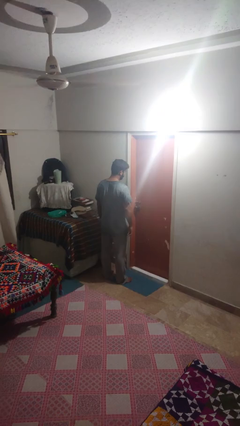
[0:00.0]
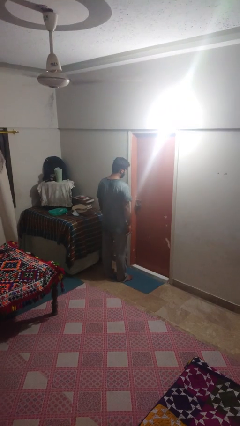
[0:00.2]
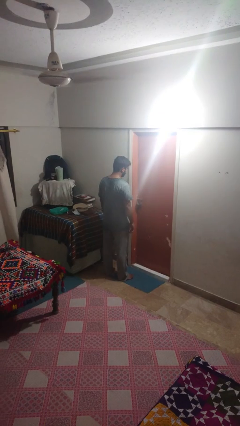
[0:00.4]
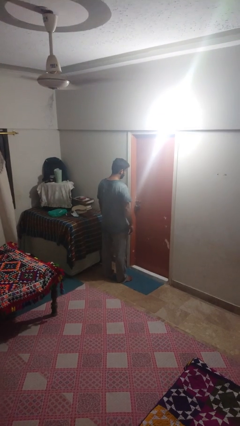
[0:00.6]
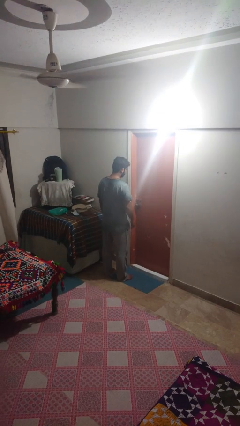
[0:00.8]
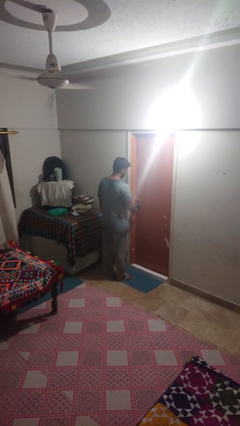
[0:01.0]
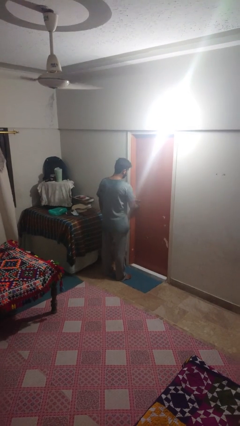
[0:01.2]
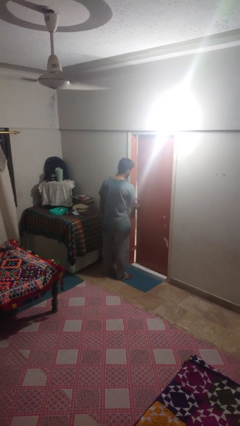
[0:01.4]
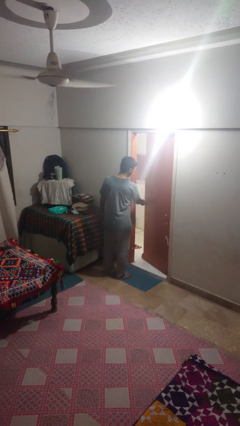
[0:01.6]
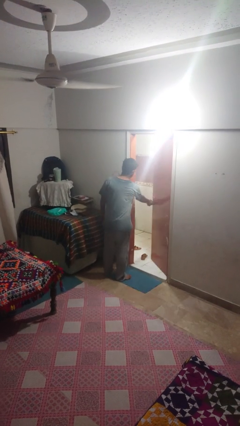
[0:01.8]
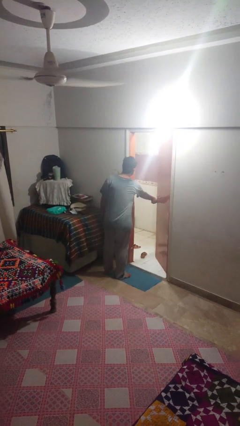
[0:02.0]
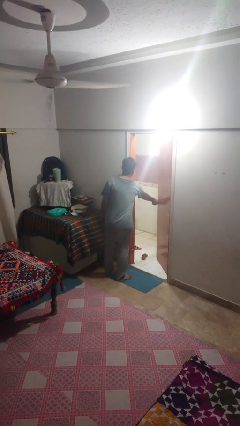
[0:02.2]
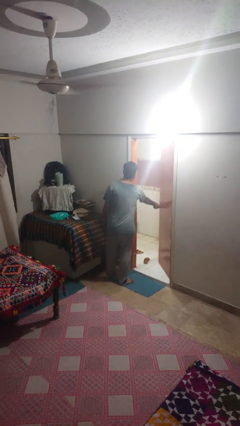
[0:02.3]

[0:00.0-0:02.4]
person opens facility door

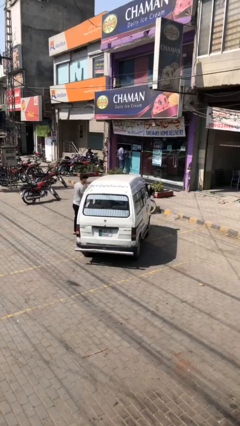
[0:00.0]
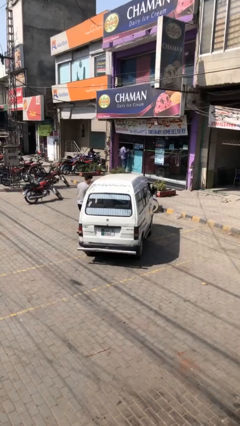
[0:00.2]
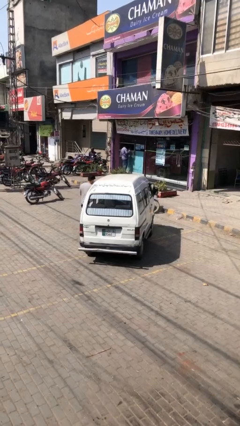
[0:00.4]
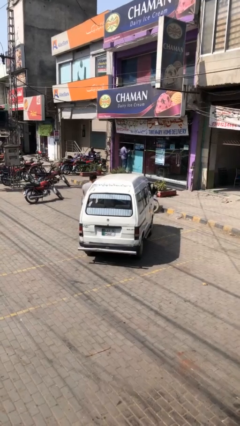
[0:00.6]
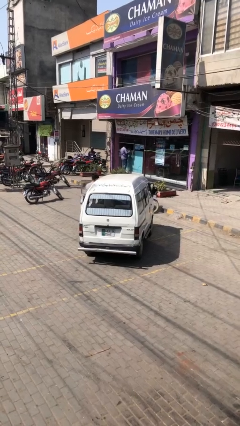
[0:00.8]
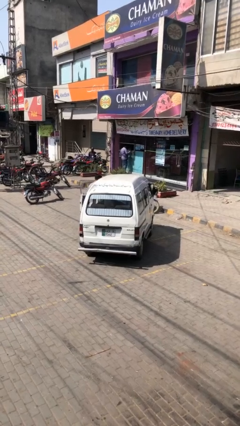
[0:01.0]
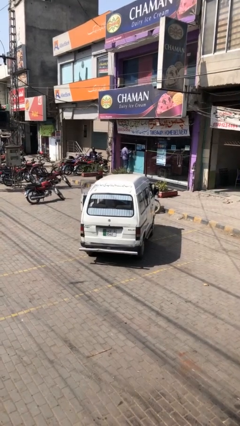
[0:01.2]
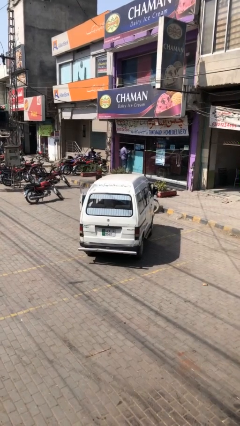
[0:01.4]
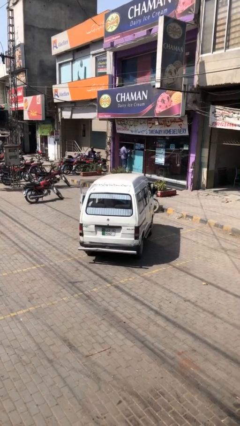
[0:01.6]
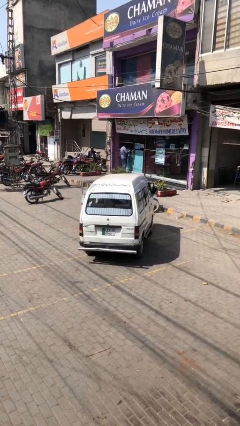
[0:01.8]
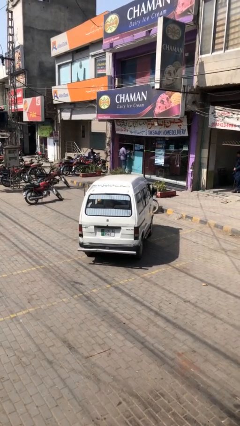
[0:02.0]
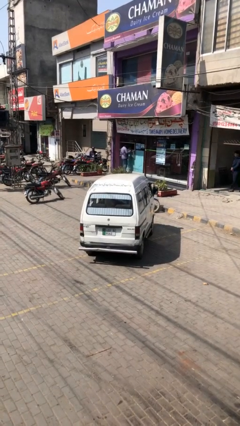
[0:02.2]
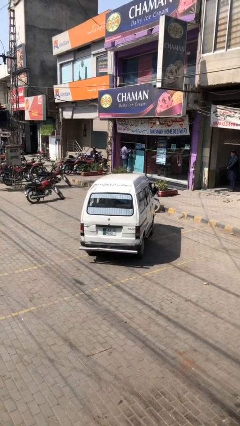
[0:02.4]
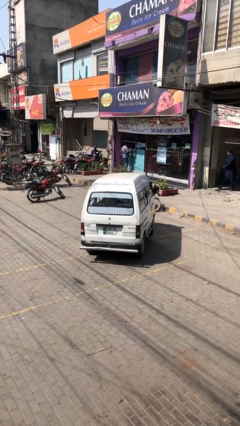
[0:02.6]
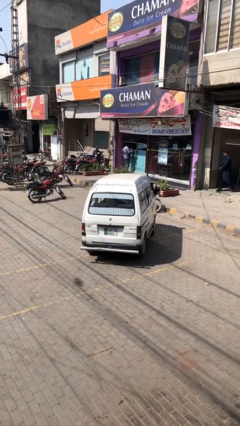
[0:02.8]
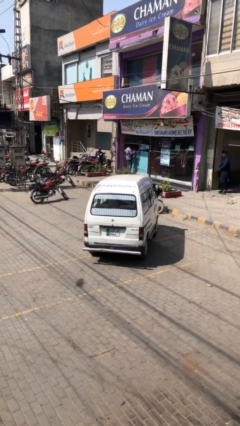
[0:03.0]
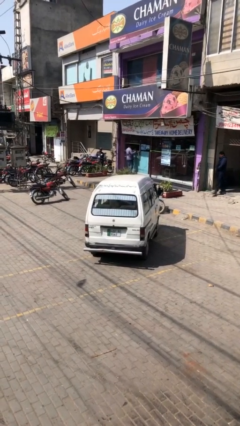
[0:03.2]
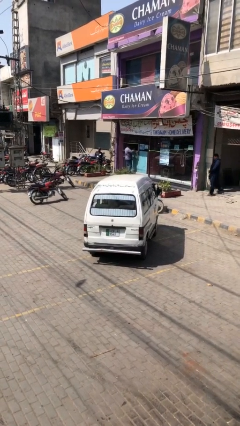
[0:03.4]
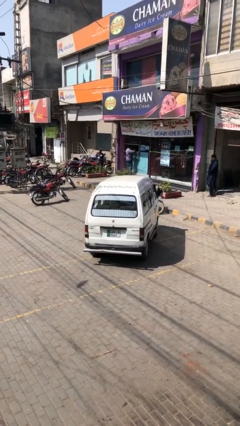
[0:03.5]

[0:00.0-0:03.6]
car picks up person

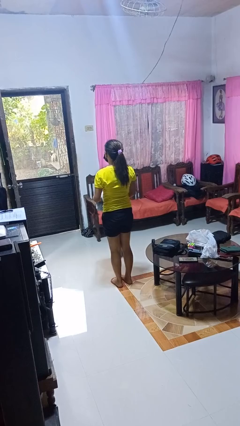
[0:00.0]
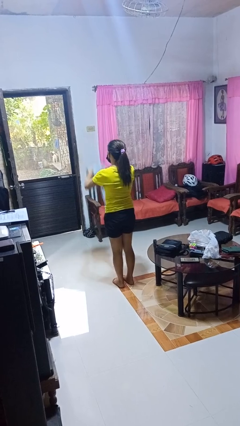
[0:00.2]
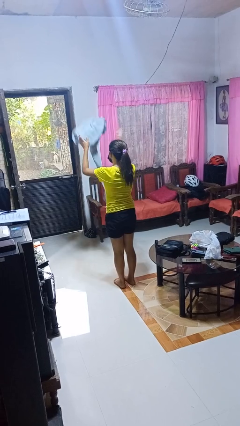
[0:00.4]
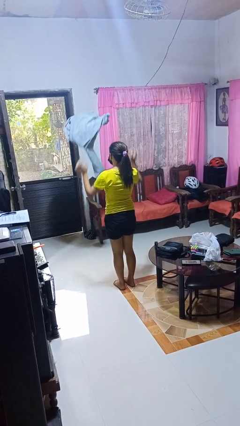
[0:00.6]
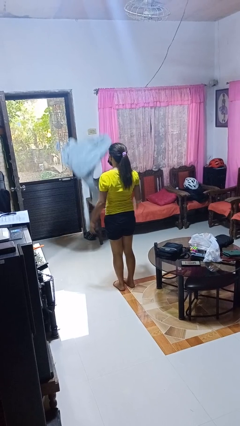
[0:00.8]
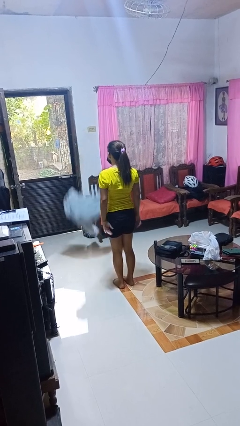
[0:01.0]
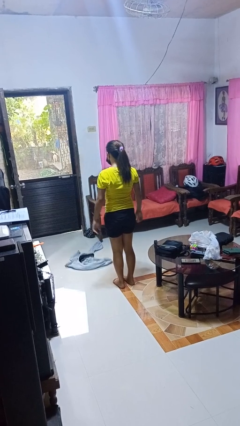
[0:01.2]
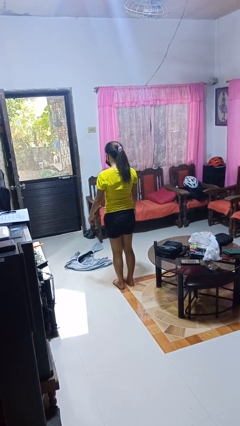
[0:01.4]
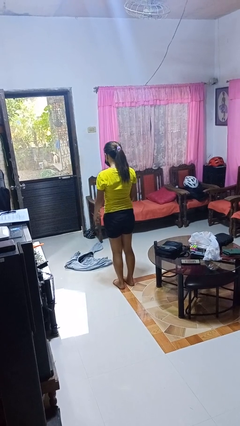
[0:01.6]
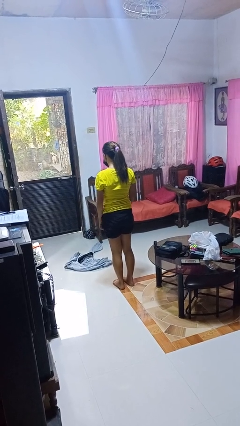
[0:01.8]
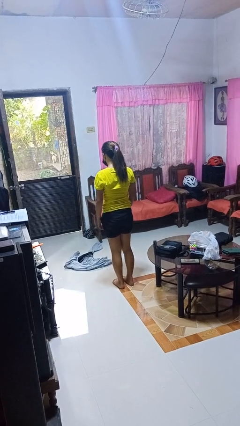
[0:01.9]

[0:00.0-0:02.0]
person throws object into air

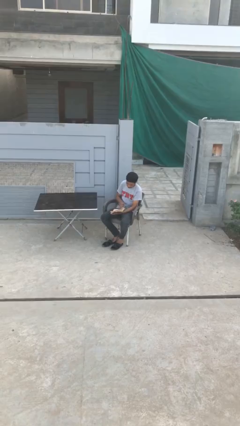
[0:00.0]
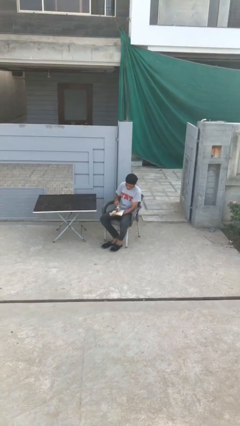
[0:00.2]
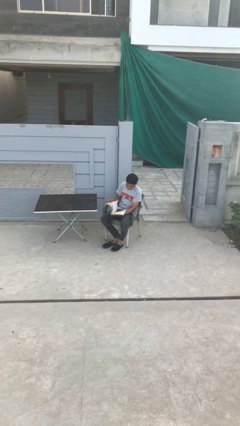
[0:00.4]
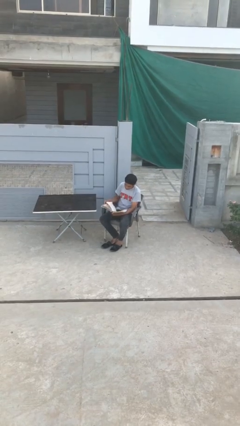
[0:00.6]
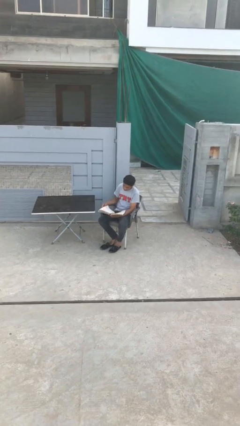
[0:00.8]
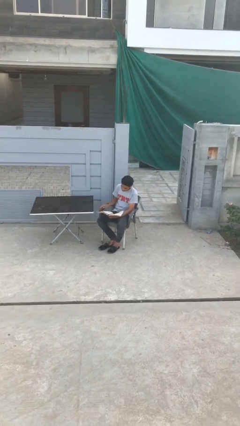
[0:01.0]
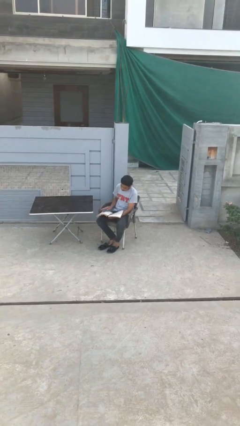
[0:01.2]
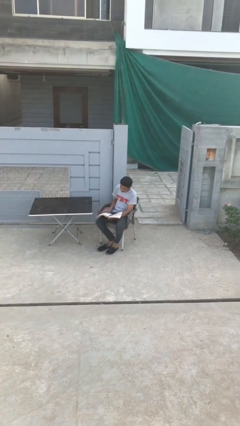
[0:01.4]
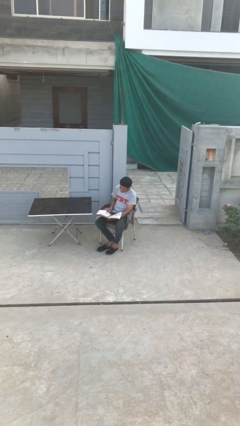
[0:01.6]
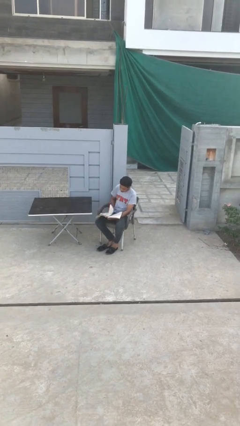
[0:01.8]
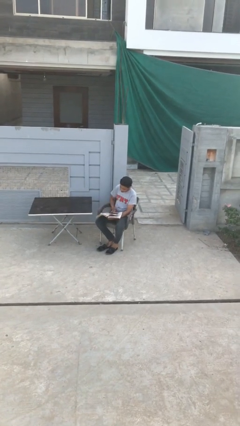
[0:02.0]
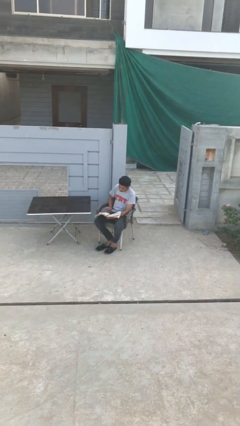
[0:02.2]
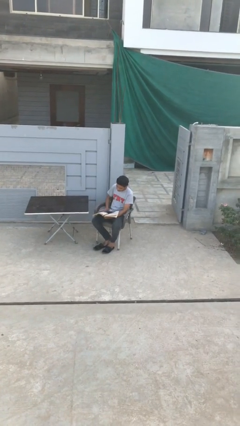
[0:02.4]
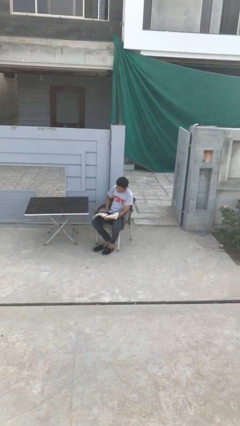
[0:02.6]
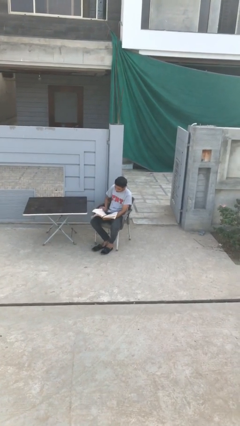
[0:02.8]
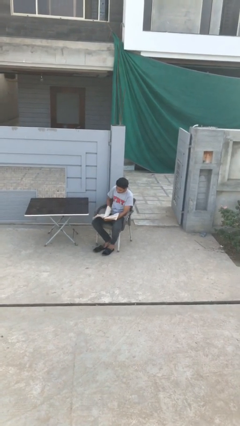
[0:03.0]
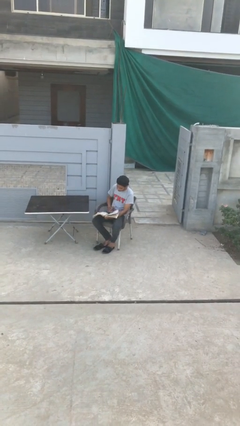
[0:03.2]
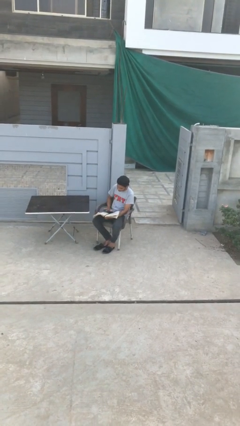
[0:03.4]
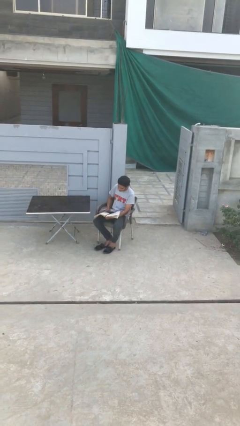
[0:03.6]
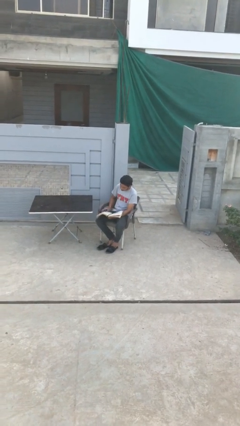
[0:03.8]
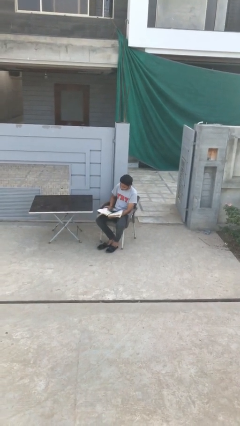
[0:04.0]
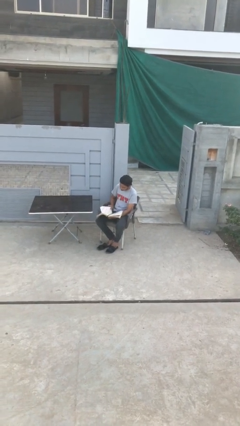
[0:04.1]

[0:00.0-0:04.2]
person reads document

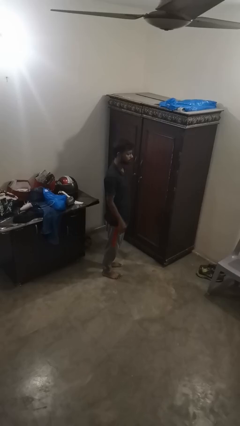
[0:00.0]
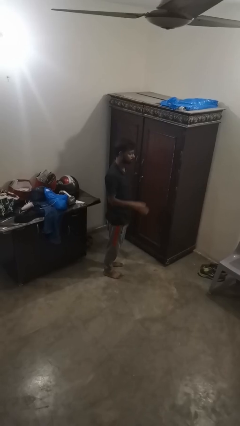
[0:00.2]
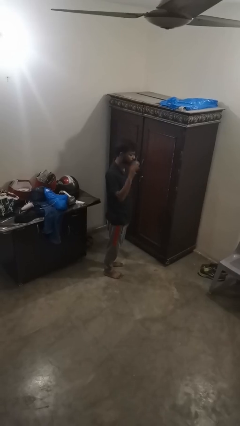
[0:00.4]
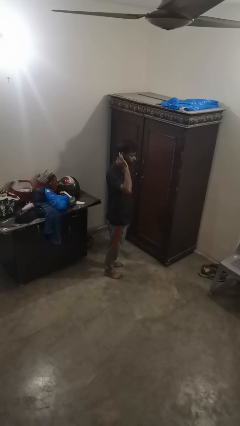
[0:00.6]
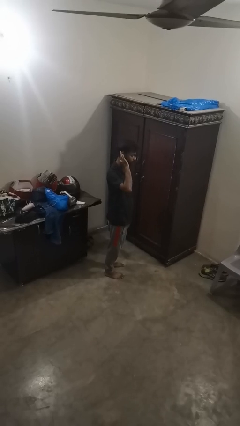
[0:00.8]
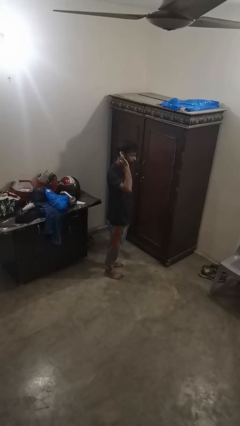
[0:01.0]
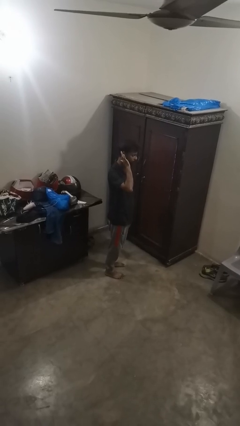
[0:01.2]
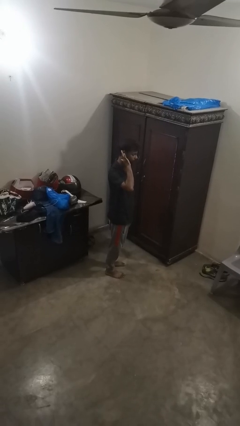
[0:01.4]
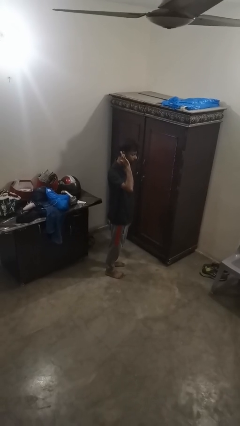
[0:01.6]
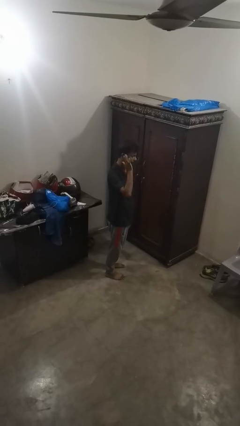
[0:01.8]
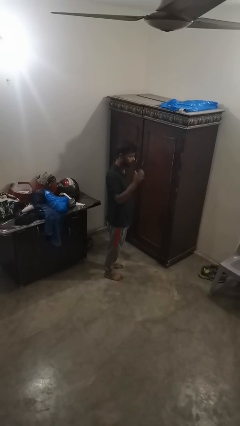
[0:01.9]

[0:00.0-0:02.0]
person gestures listen closely

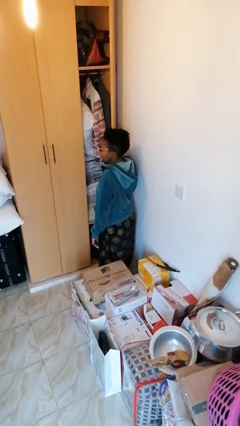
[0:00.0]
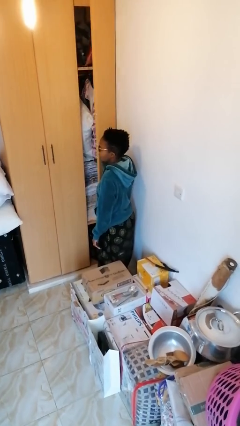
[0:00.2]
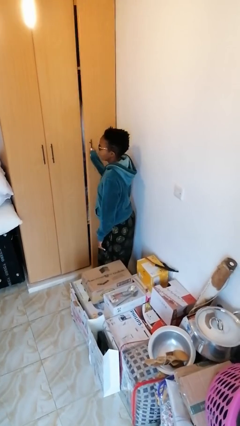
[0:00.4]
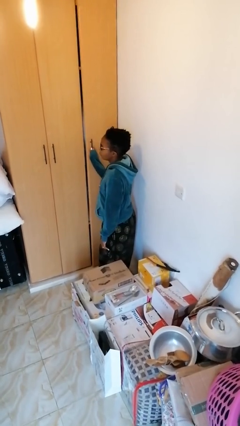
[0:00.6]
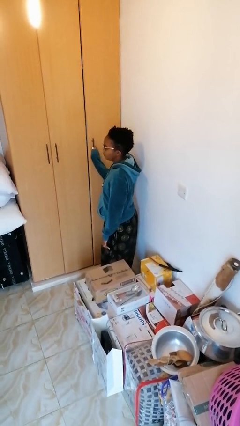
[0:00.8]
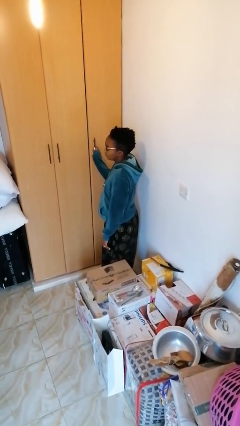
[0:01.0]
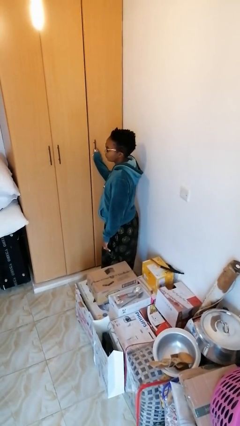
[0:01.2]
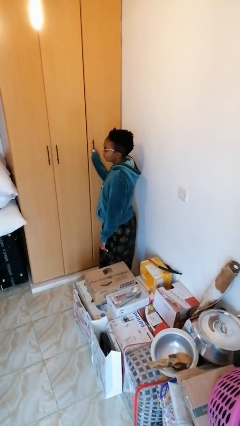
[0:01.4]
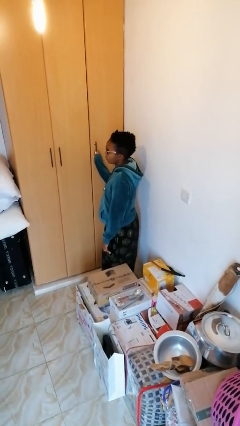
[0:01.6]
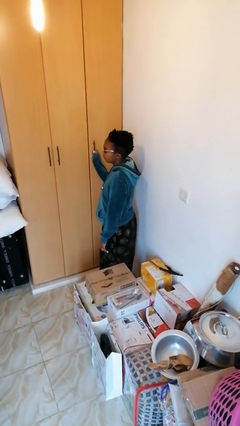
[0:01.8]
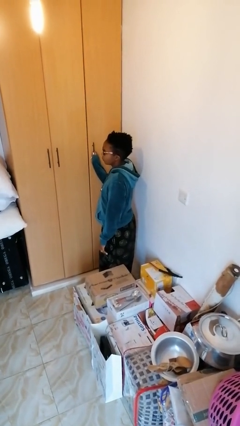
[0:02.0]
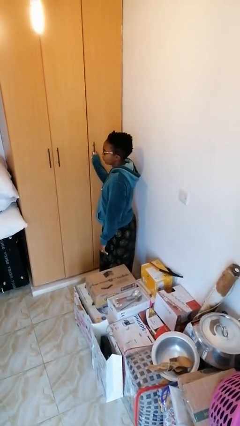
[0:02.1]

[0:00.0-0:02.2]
person closes closet door

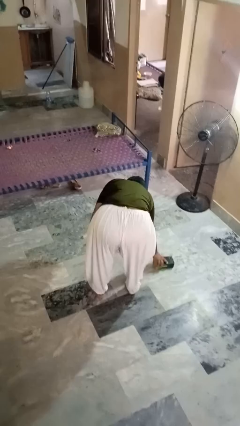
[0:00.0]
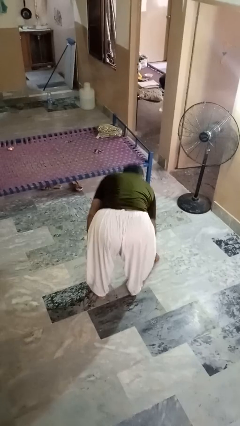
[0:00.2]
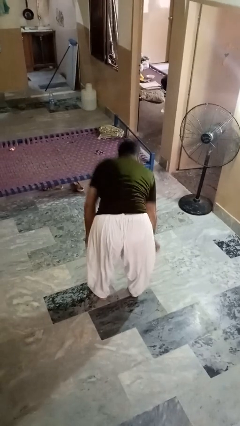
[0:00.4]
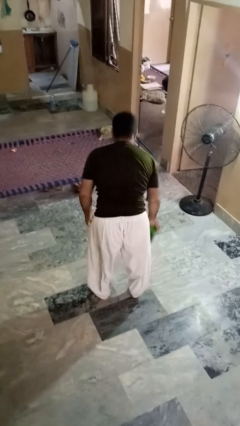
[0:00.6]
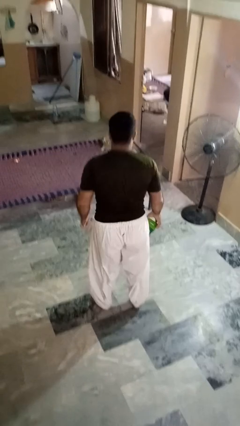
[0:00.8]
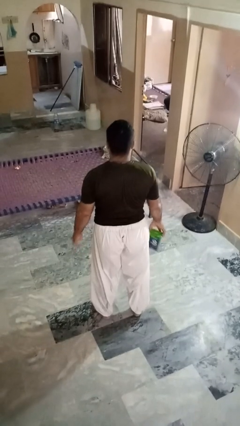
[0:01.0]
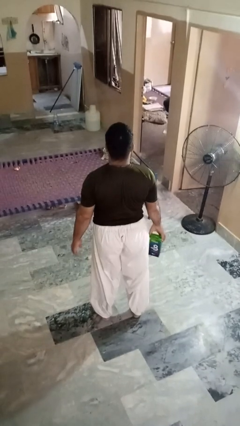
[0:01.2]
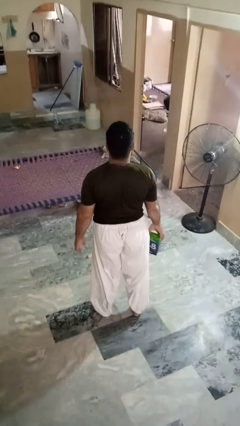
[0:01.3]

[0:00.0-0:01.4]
person picks up object from floor
